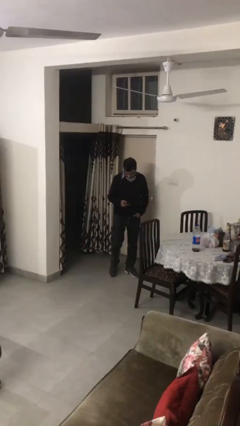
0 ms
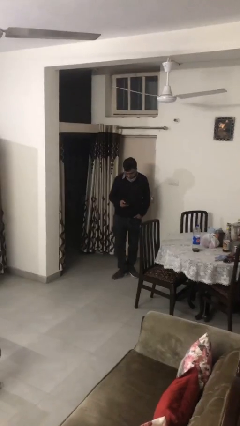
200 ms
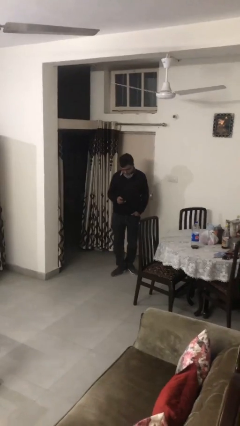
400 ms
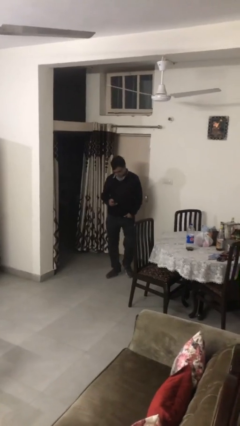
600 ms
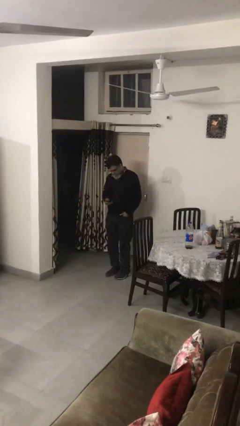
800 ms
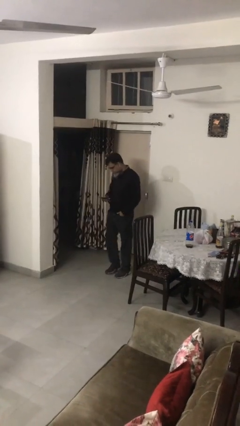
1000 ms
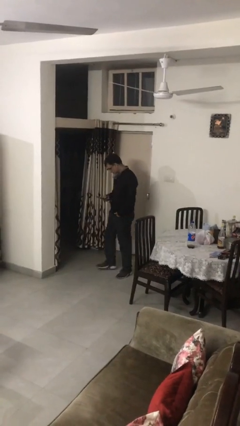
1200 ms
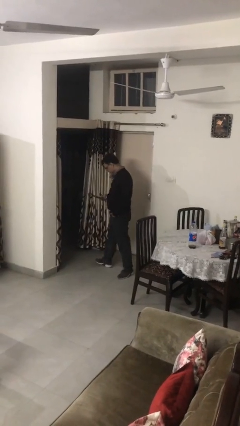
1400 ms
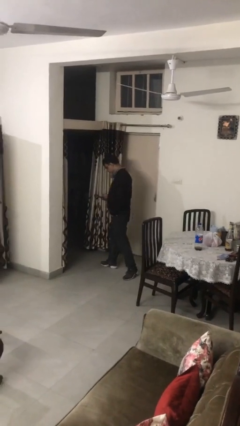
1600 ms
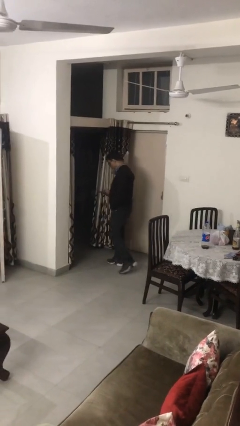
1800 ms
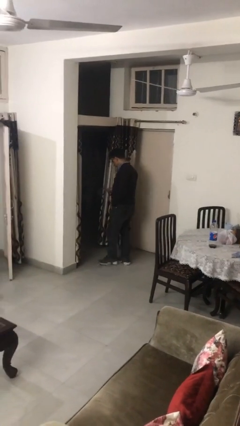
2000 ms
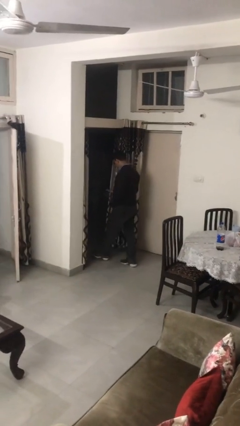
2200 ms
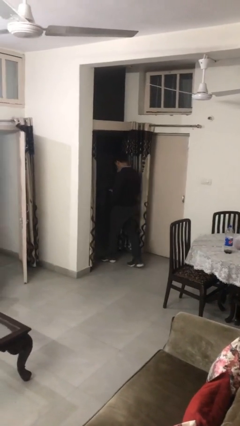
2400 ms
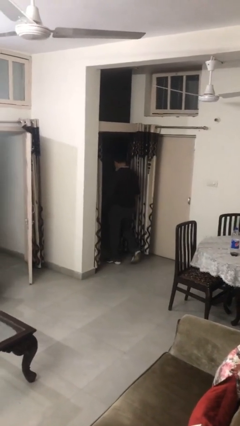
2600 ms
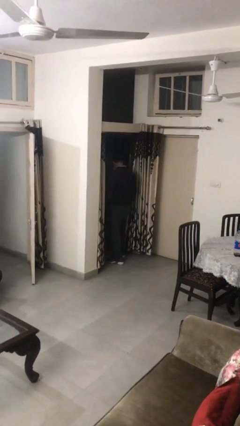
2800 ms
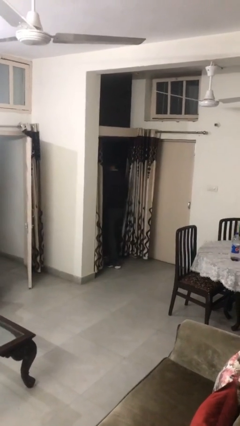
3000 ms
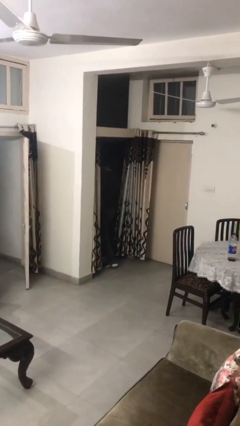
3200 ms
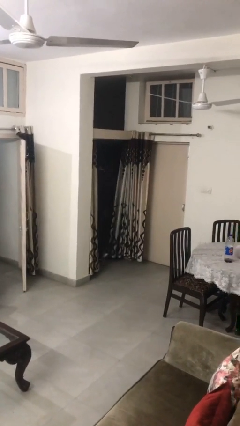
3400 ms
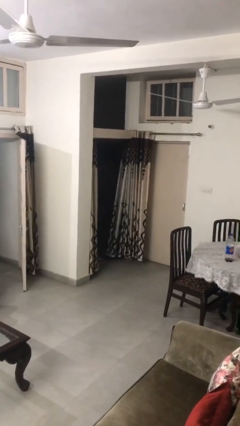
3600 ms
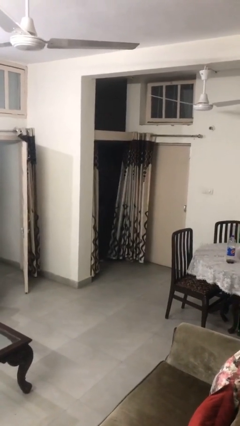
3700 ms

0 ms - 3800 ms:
person exits scene through structure

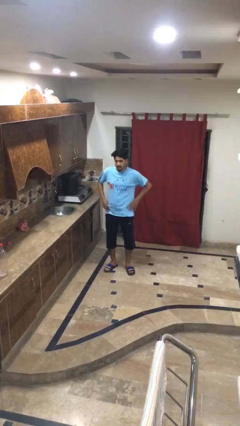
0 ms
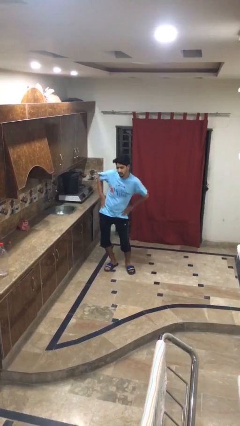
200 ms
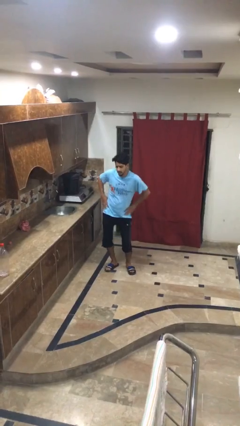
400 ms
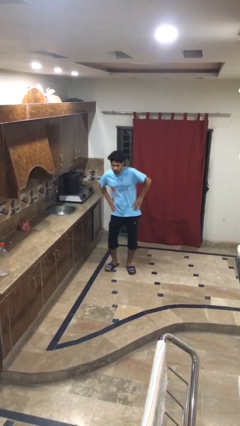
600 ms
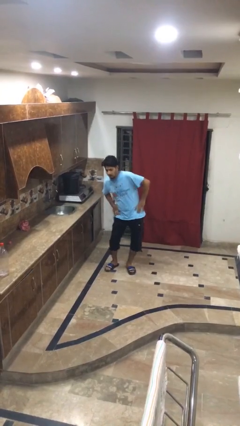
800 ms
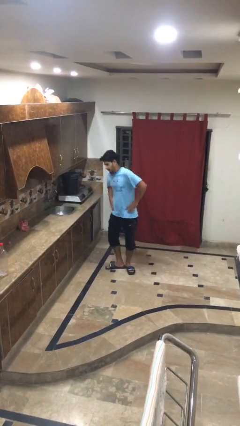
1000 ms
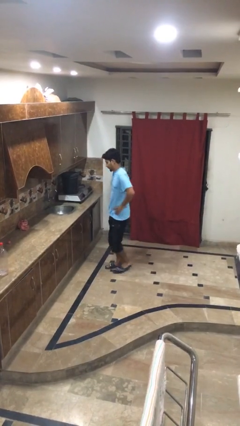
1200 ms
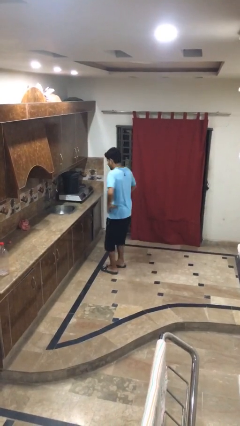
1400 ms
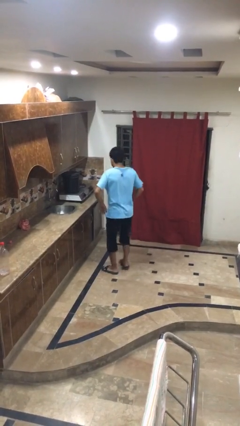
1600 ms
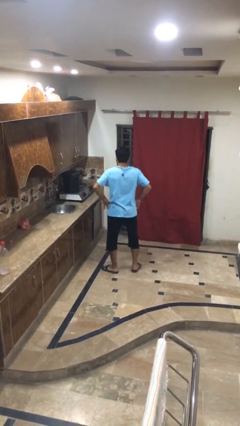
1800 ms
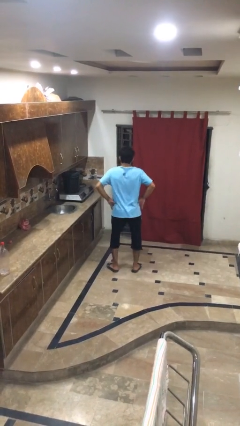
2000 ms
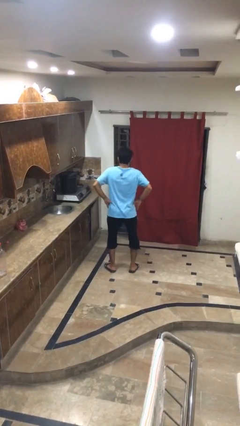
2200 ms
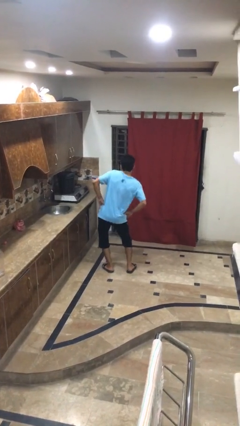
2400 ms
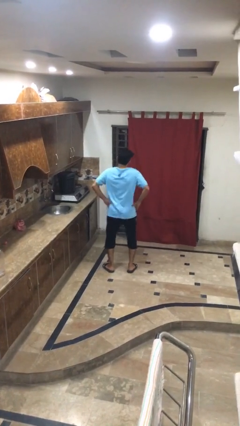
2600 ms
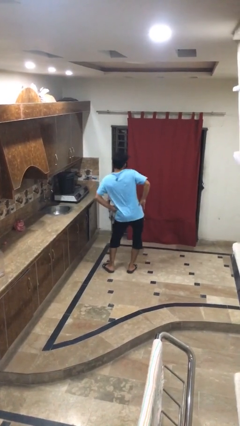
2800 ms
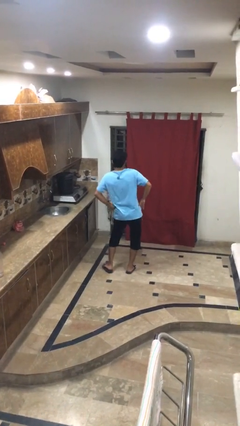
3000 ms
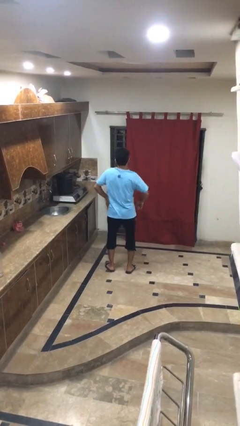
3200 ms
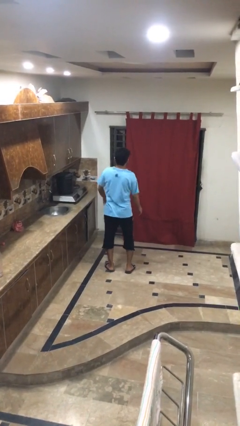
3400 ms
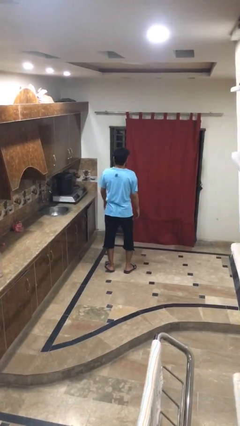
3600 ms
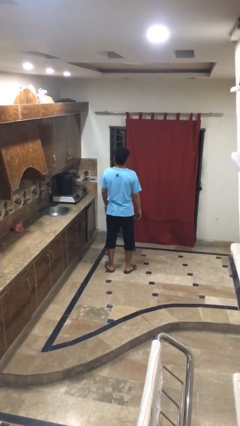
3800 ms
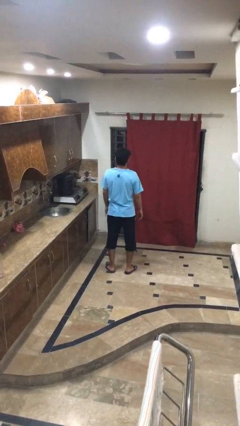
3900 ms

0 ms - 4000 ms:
person wiggles hips

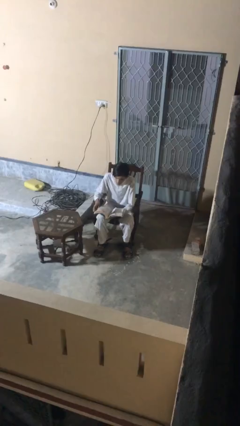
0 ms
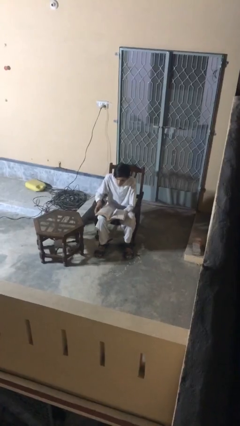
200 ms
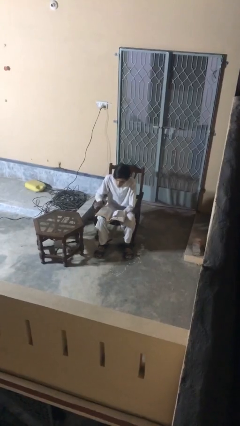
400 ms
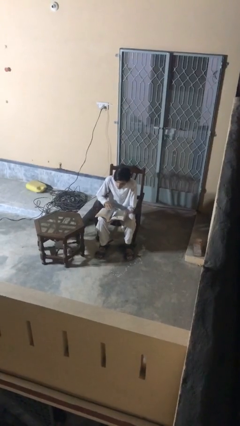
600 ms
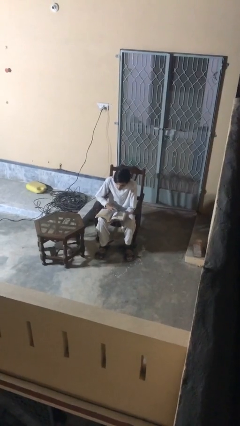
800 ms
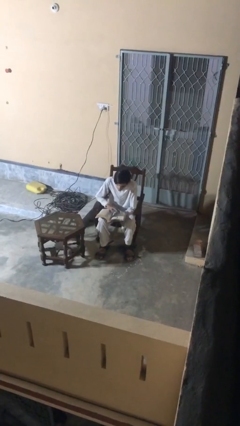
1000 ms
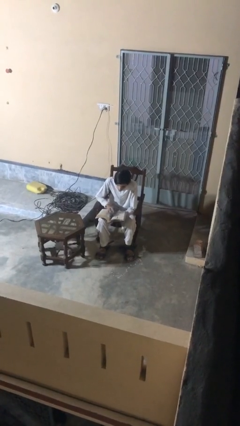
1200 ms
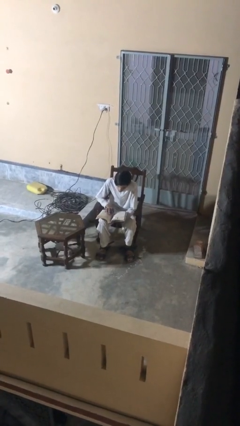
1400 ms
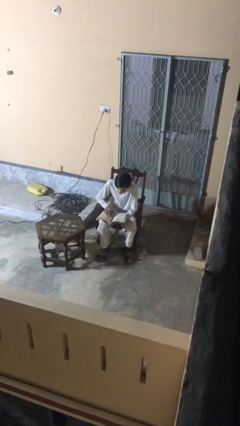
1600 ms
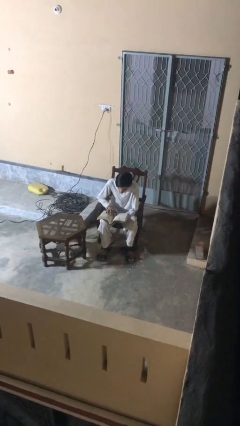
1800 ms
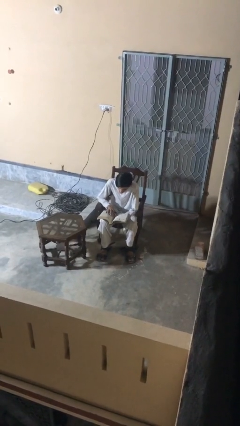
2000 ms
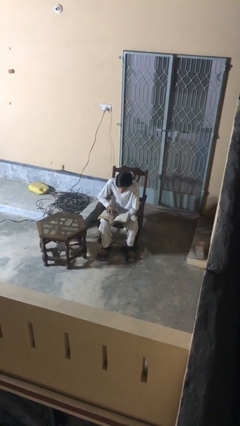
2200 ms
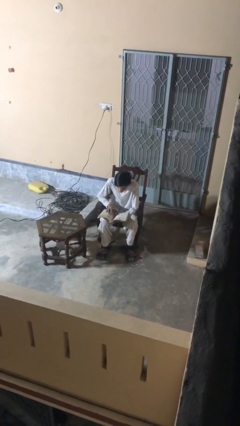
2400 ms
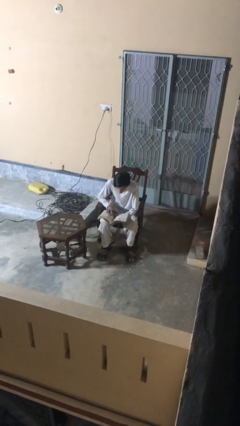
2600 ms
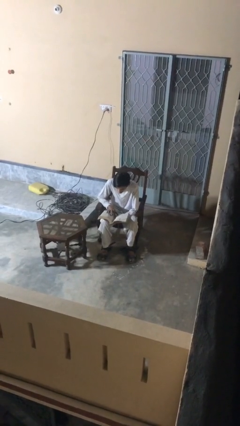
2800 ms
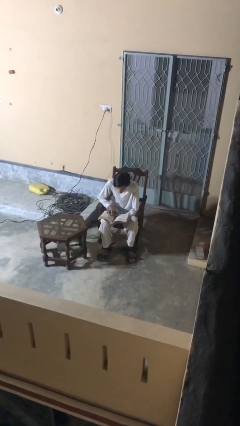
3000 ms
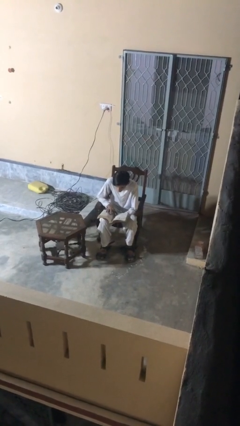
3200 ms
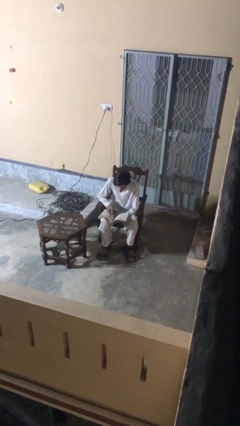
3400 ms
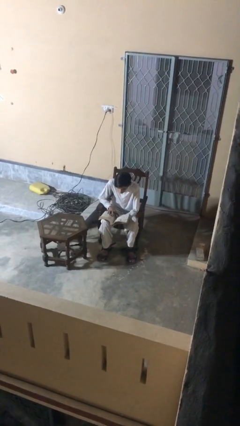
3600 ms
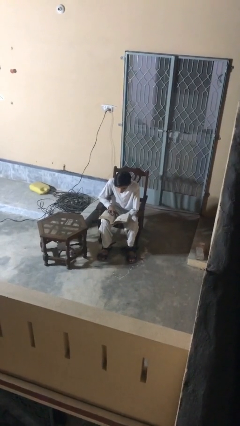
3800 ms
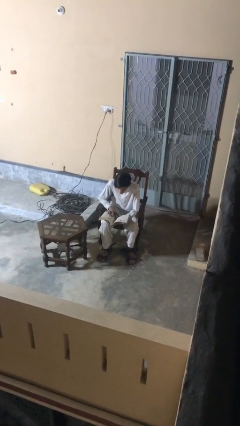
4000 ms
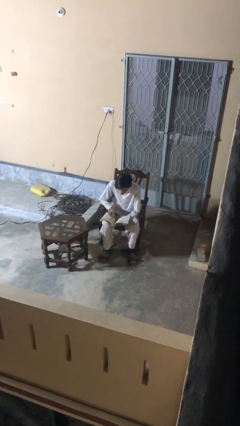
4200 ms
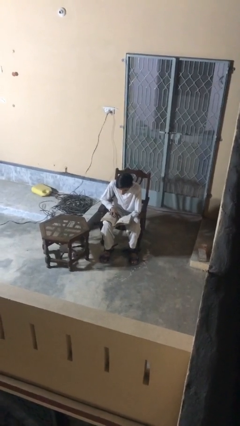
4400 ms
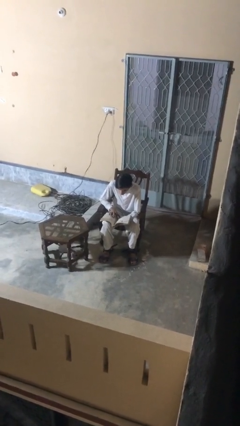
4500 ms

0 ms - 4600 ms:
person reads document

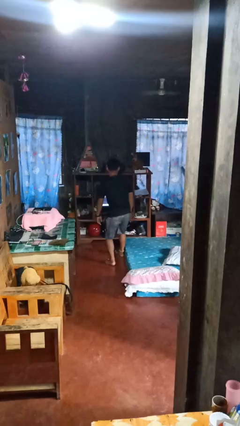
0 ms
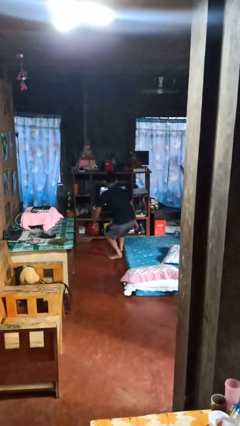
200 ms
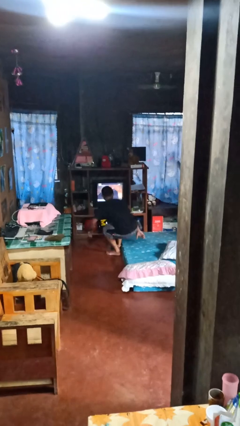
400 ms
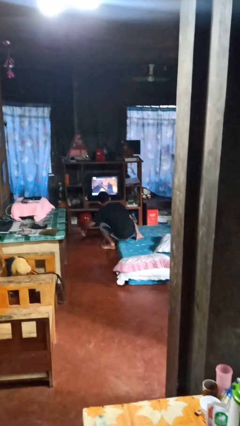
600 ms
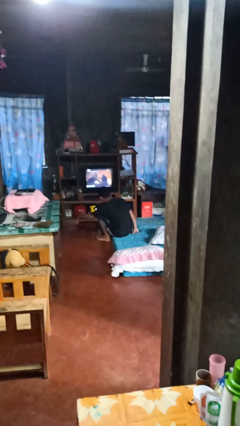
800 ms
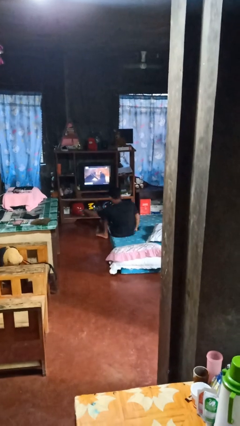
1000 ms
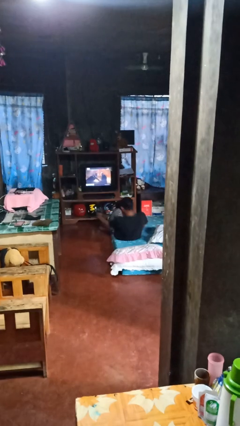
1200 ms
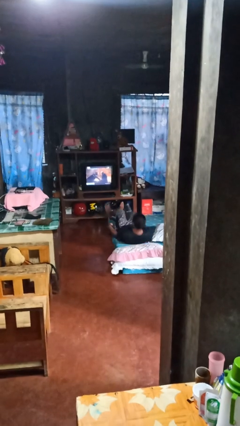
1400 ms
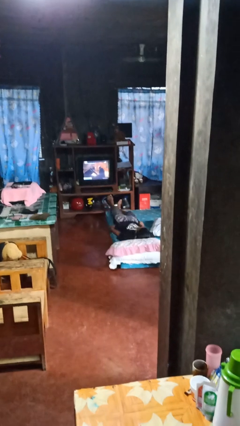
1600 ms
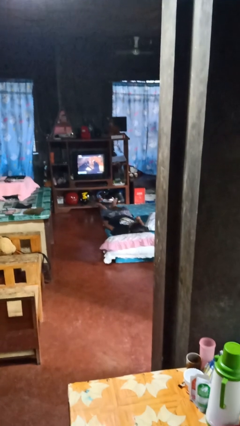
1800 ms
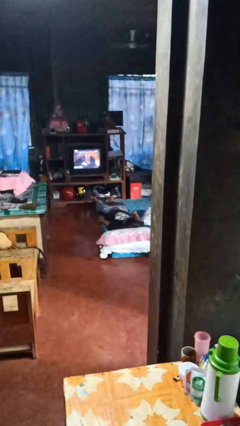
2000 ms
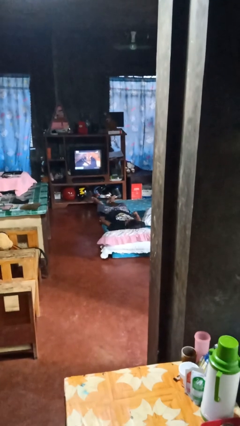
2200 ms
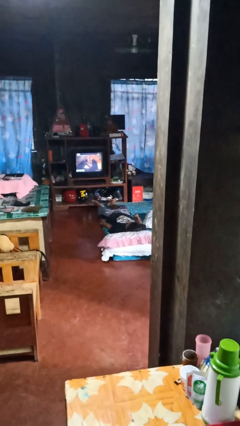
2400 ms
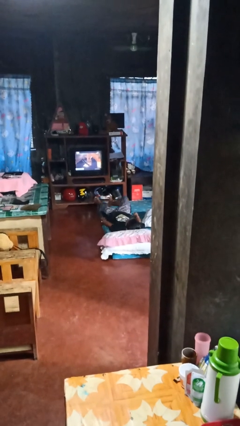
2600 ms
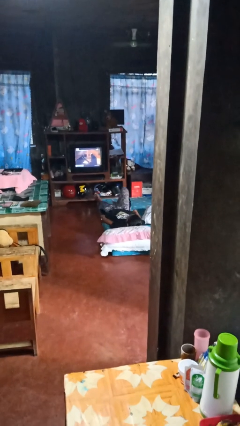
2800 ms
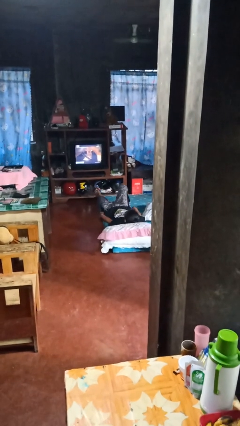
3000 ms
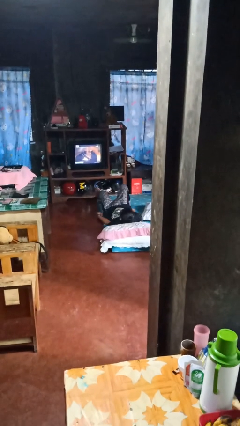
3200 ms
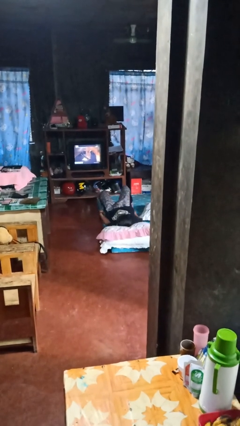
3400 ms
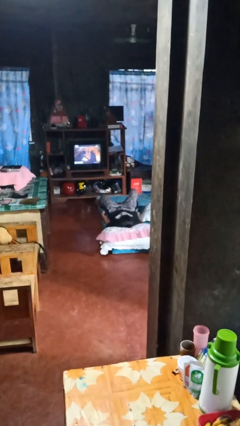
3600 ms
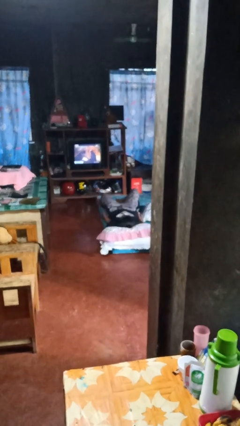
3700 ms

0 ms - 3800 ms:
person lies down on bed

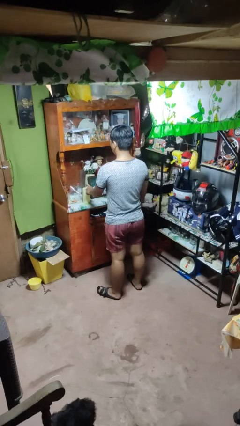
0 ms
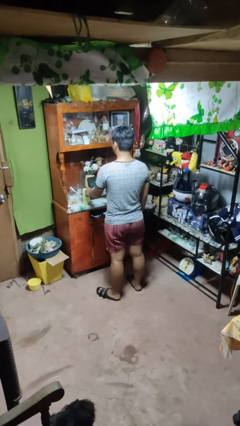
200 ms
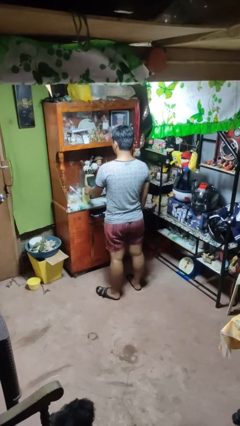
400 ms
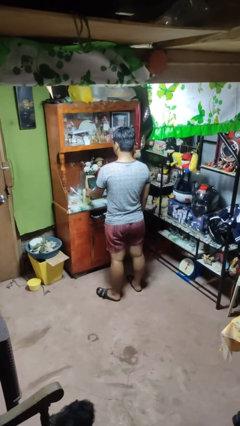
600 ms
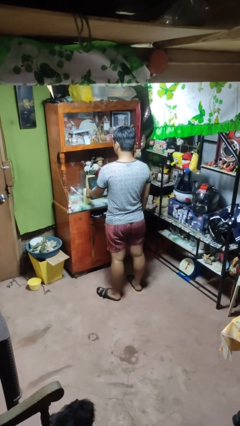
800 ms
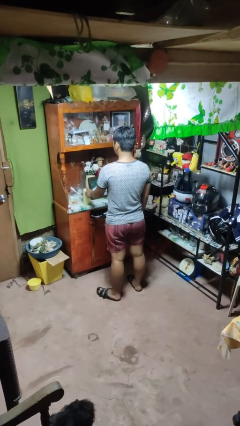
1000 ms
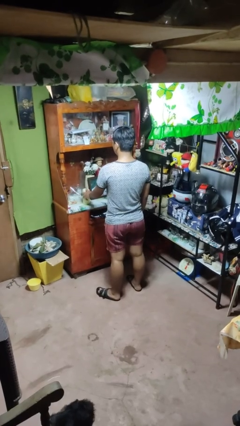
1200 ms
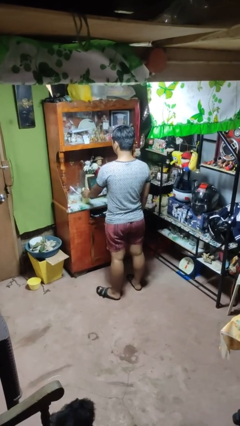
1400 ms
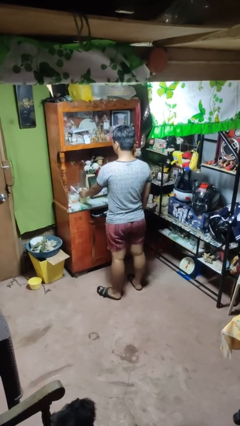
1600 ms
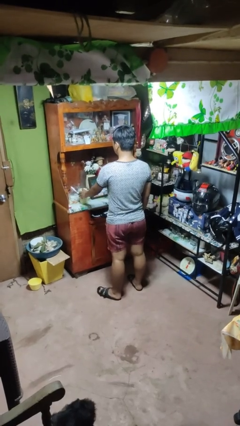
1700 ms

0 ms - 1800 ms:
person taps object with finger
